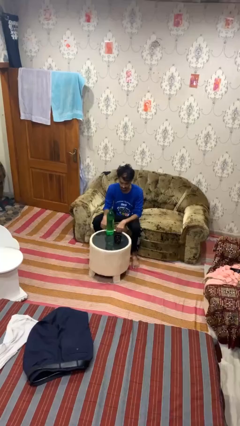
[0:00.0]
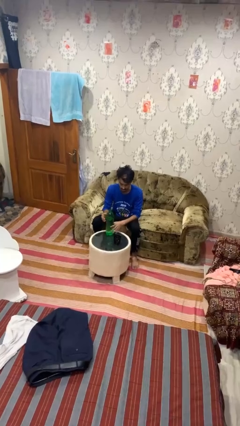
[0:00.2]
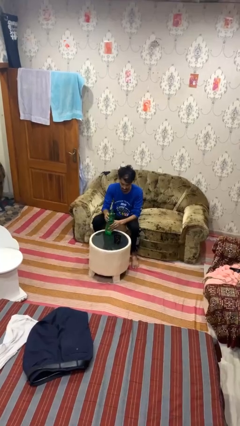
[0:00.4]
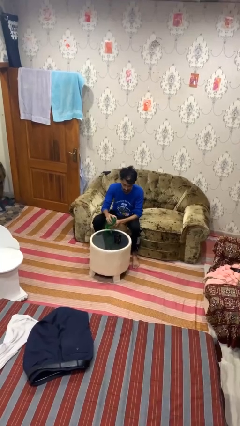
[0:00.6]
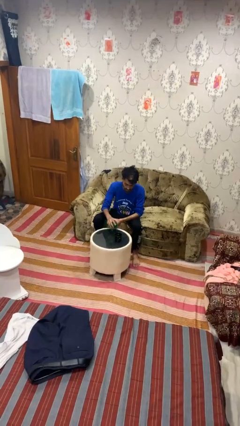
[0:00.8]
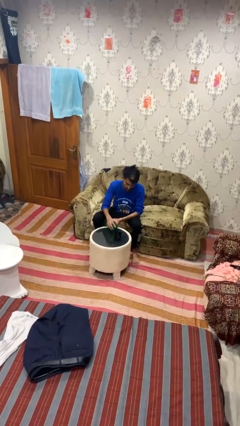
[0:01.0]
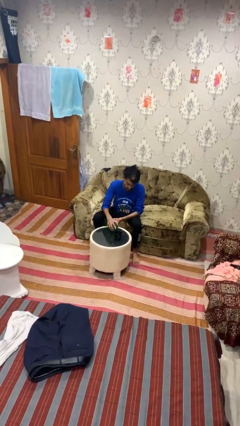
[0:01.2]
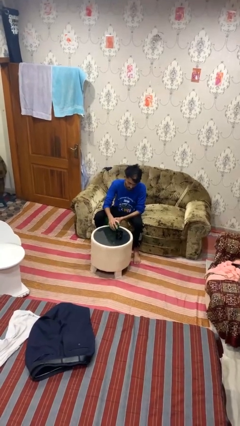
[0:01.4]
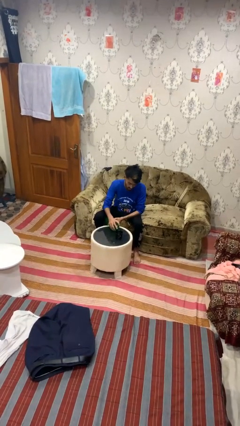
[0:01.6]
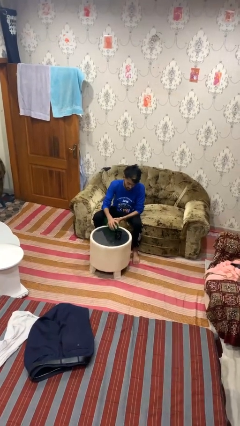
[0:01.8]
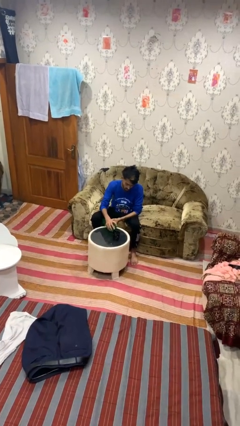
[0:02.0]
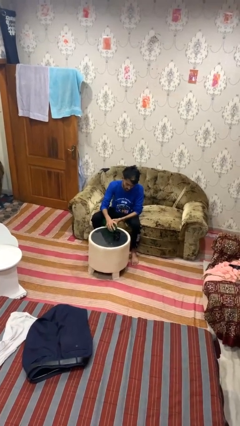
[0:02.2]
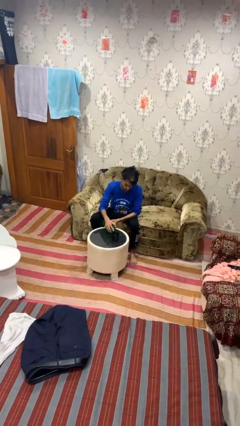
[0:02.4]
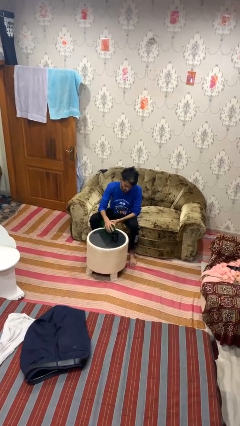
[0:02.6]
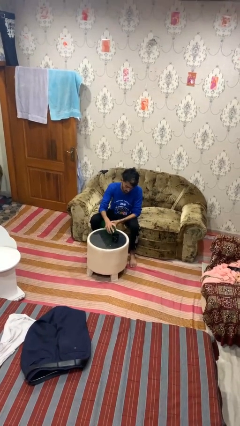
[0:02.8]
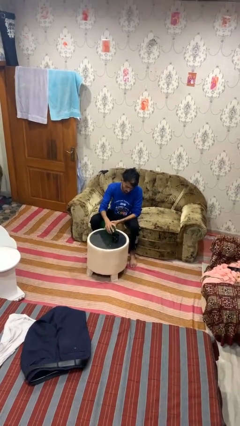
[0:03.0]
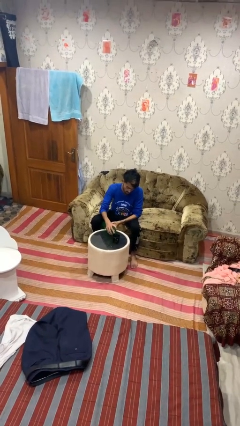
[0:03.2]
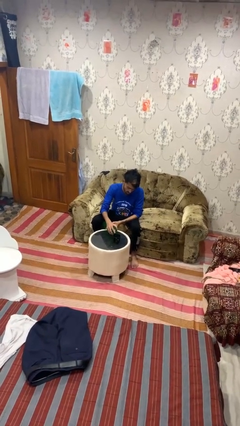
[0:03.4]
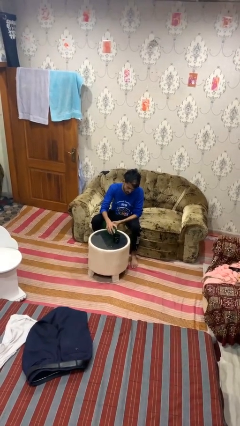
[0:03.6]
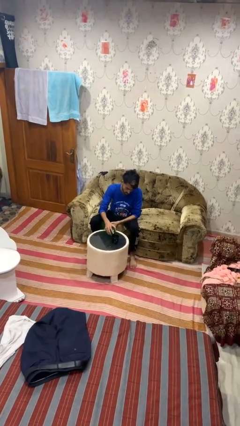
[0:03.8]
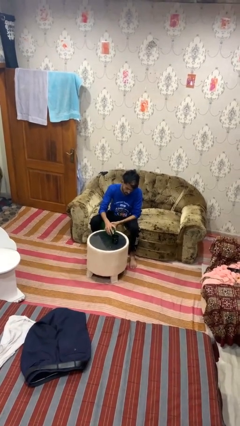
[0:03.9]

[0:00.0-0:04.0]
person pours liquid into cup

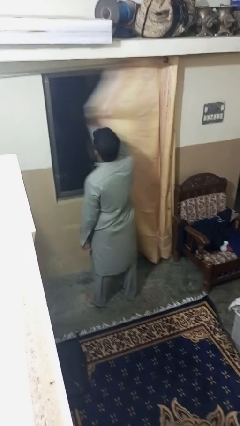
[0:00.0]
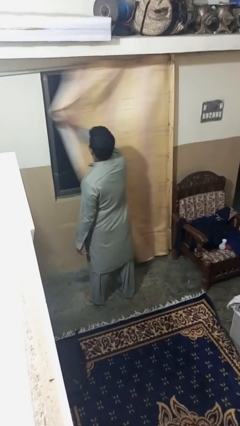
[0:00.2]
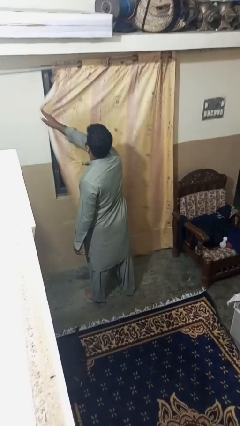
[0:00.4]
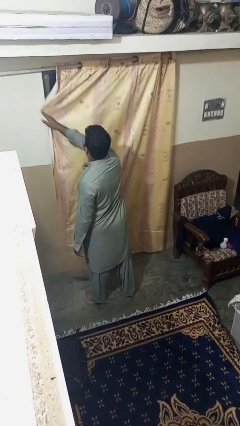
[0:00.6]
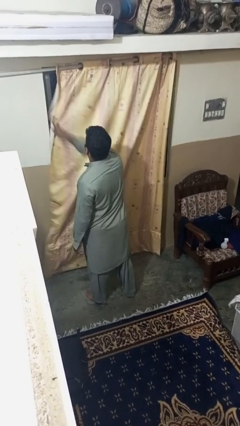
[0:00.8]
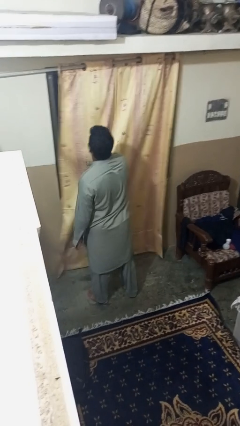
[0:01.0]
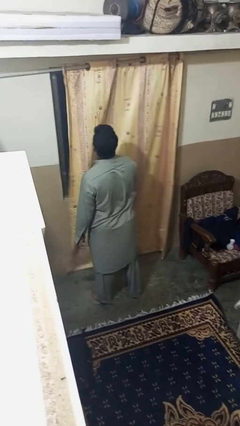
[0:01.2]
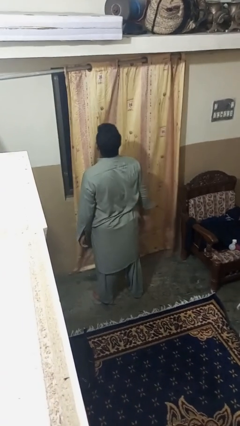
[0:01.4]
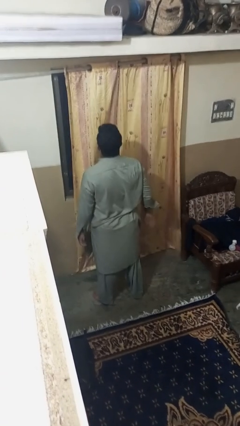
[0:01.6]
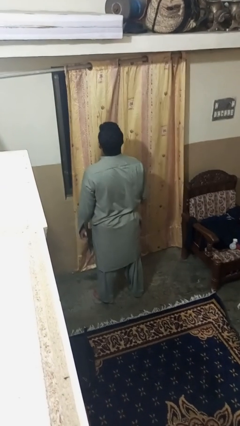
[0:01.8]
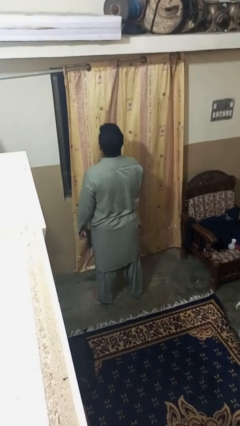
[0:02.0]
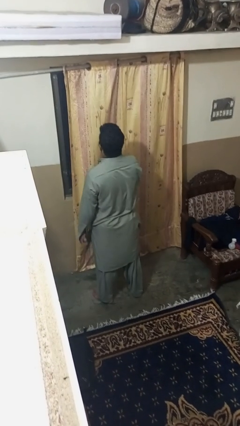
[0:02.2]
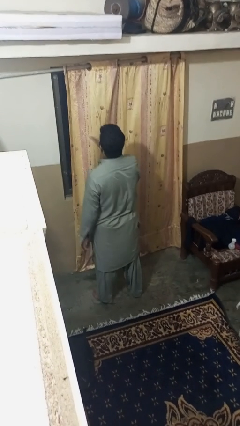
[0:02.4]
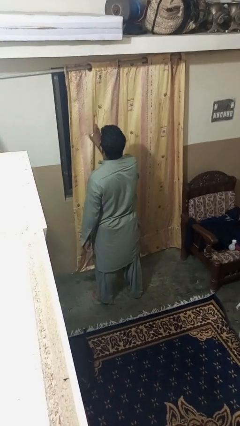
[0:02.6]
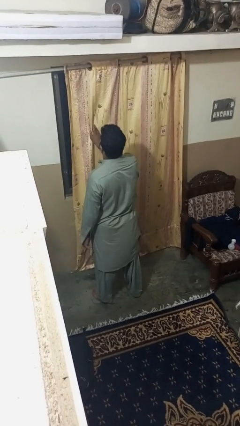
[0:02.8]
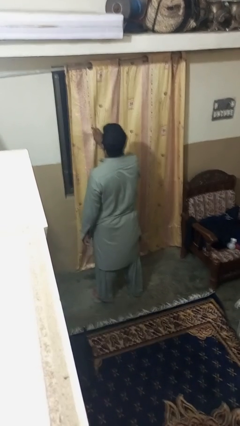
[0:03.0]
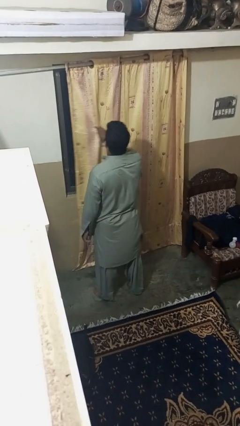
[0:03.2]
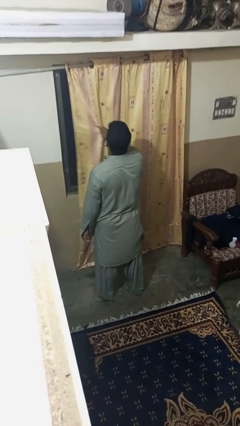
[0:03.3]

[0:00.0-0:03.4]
person closes curtains

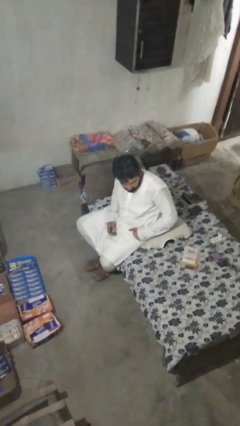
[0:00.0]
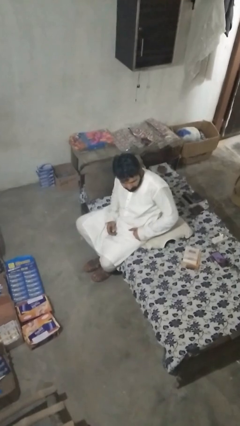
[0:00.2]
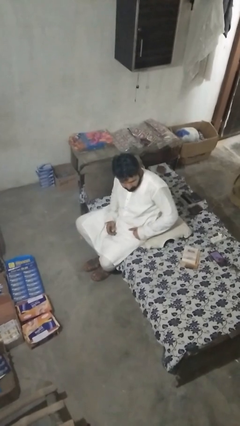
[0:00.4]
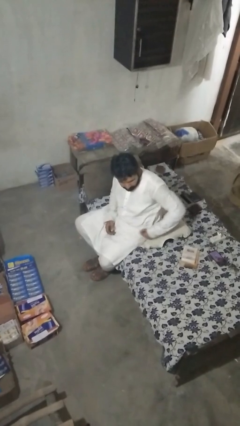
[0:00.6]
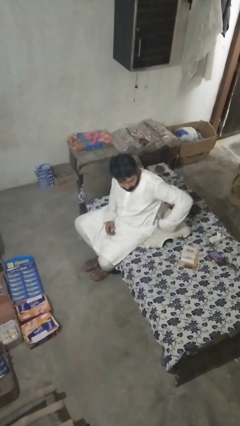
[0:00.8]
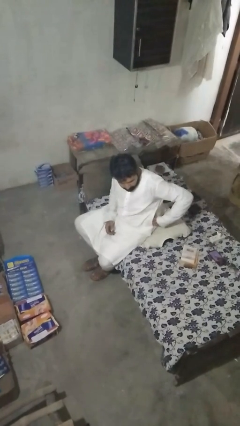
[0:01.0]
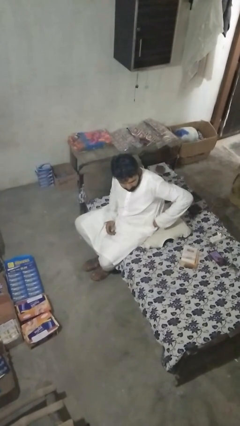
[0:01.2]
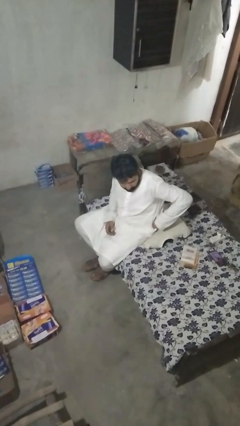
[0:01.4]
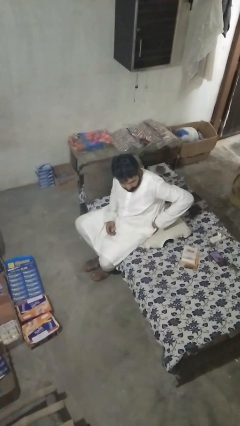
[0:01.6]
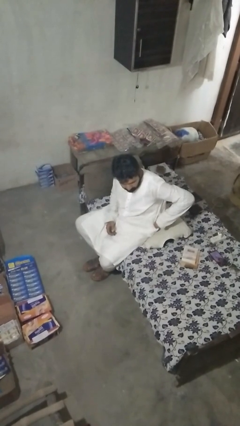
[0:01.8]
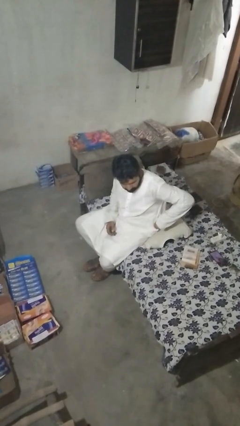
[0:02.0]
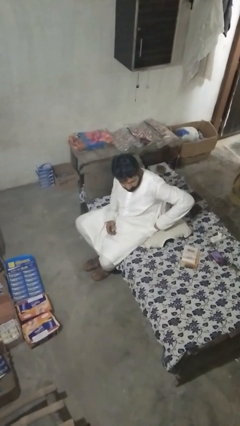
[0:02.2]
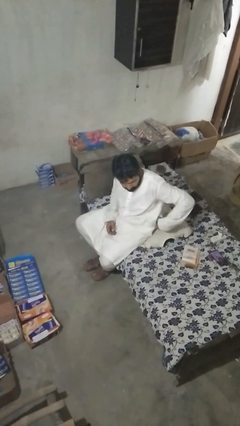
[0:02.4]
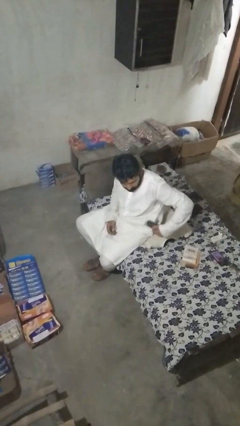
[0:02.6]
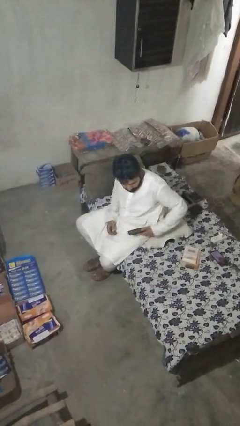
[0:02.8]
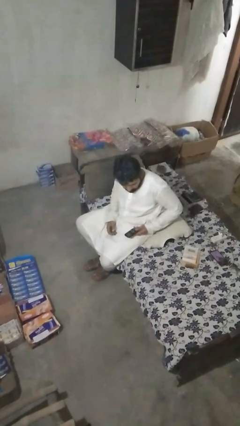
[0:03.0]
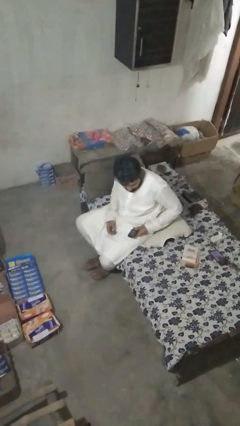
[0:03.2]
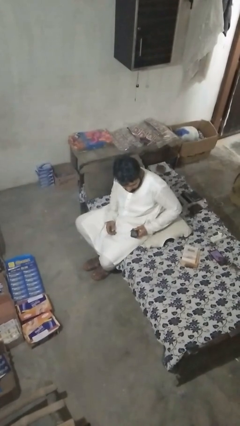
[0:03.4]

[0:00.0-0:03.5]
person takes phone from pocket

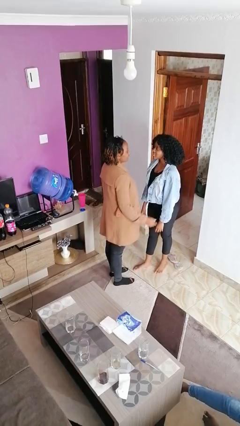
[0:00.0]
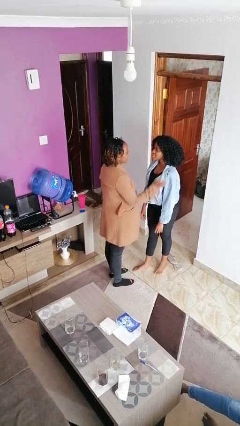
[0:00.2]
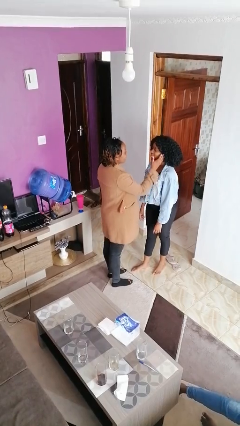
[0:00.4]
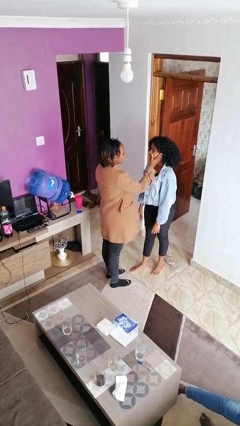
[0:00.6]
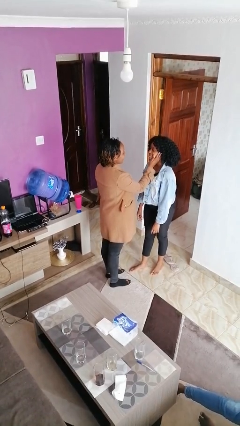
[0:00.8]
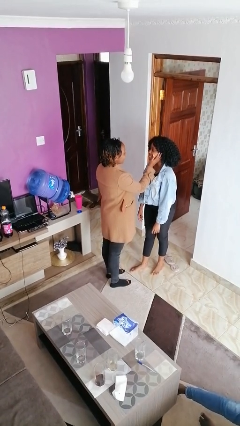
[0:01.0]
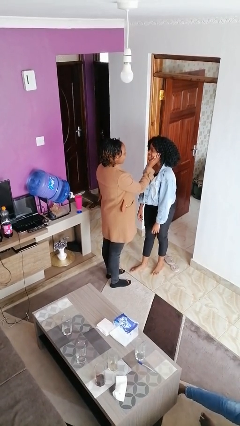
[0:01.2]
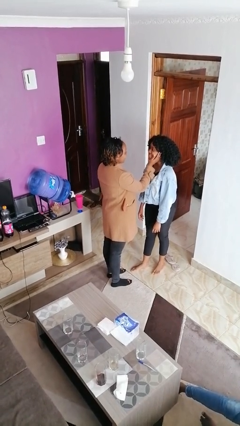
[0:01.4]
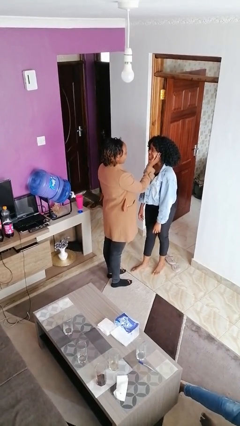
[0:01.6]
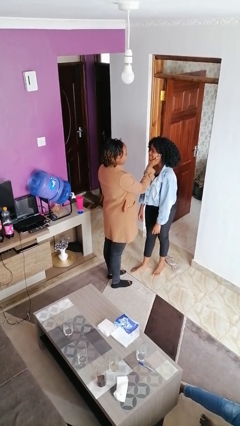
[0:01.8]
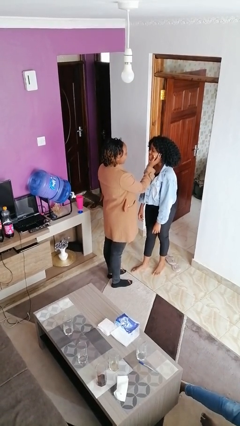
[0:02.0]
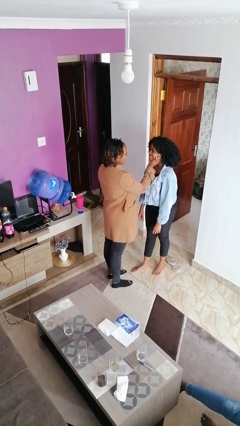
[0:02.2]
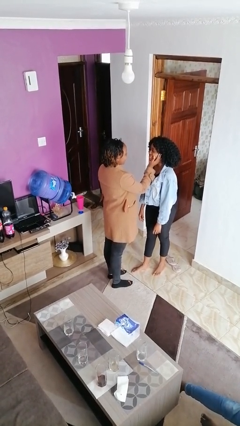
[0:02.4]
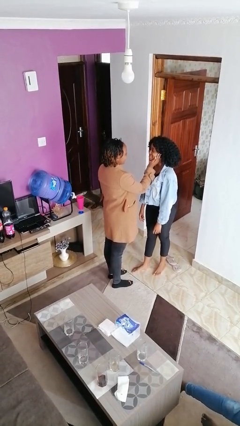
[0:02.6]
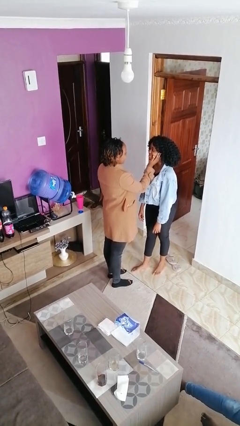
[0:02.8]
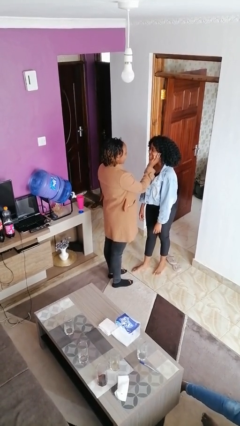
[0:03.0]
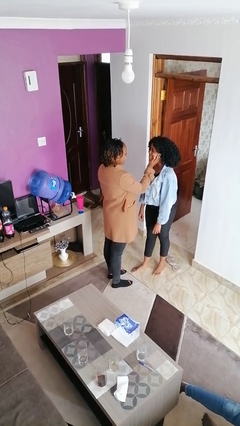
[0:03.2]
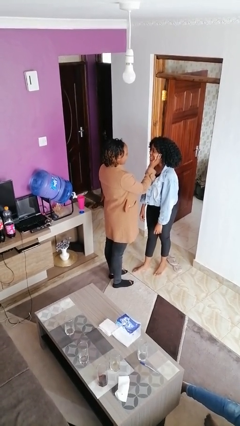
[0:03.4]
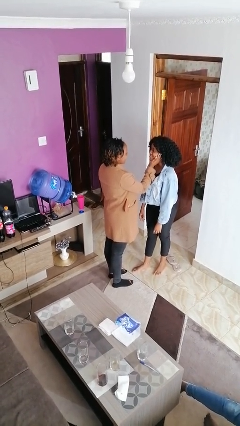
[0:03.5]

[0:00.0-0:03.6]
person touches face of person

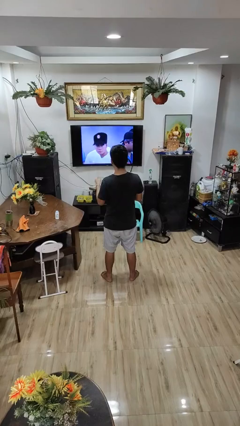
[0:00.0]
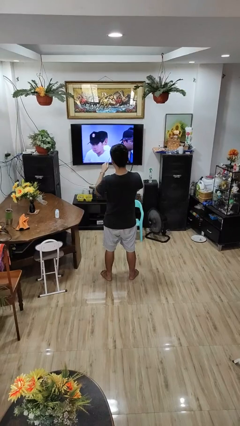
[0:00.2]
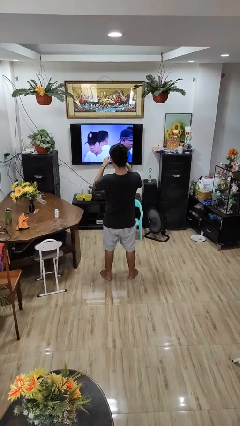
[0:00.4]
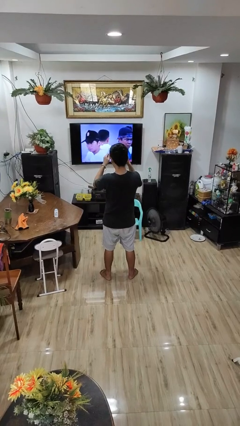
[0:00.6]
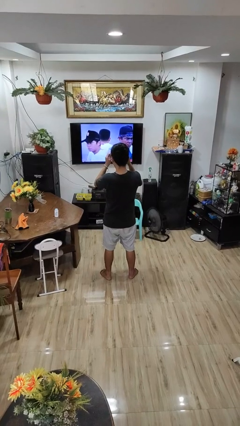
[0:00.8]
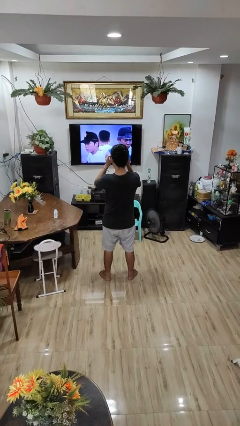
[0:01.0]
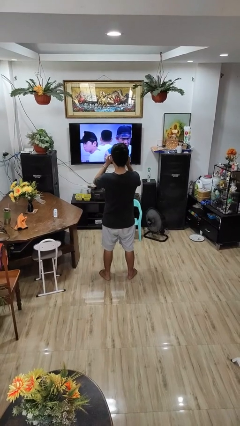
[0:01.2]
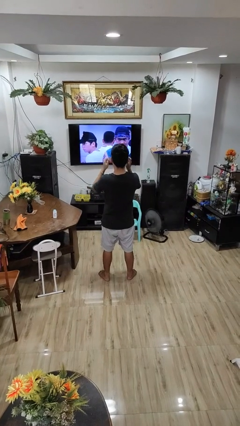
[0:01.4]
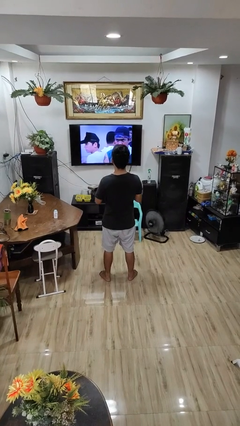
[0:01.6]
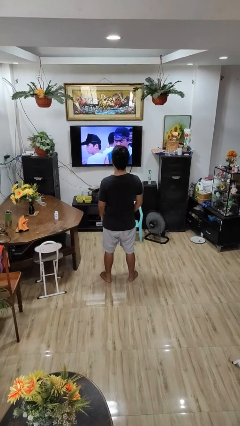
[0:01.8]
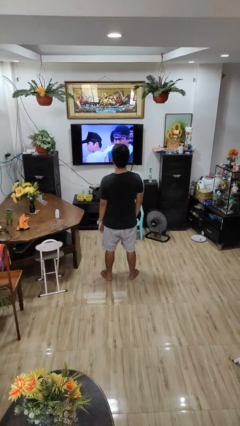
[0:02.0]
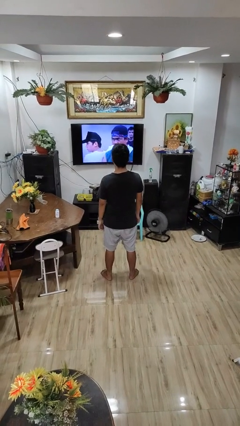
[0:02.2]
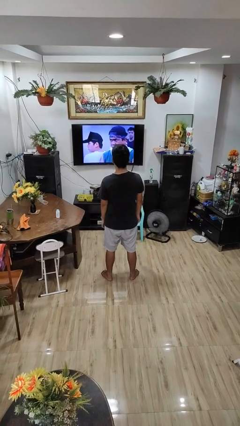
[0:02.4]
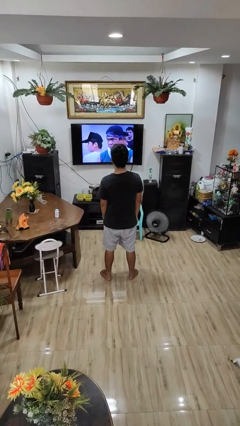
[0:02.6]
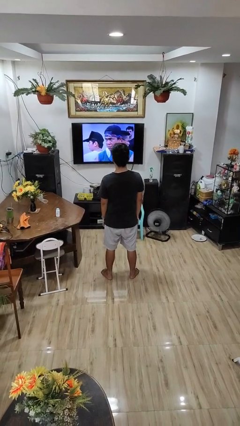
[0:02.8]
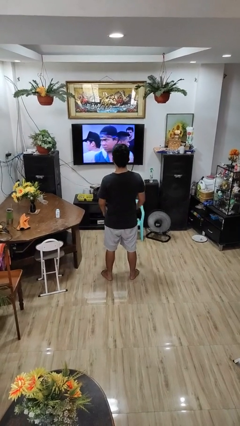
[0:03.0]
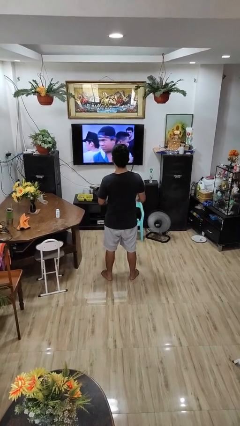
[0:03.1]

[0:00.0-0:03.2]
person puts on glasses

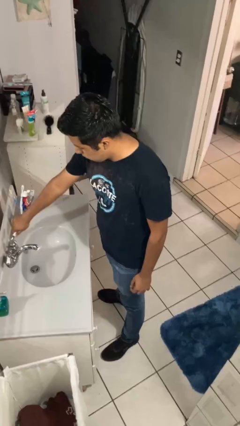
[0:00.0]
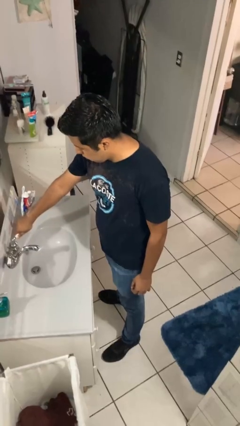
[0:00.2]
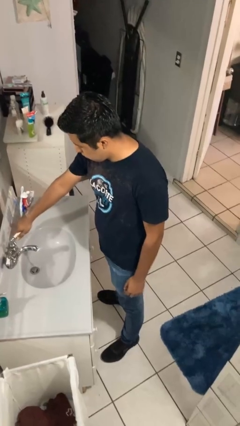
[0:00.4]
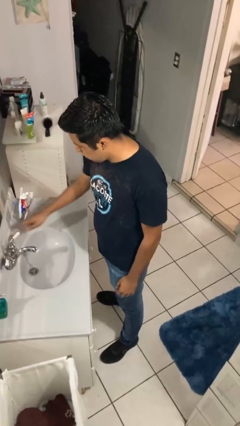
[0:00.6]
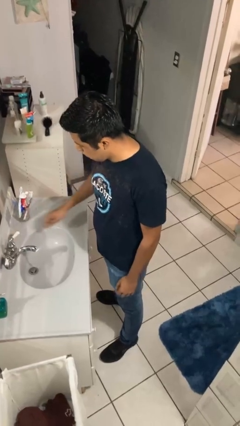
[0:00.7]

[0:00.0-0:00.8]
person turns on faucet
